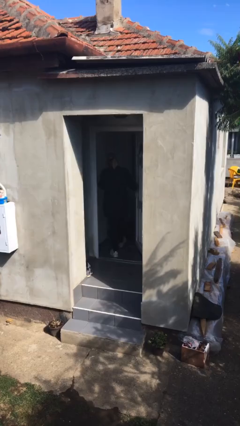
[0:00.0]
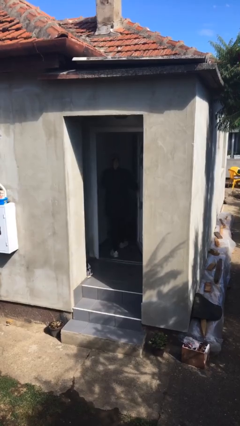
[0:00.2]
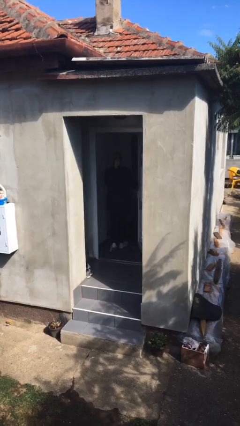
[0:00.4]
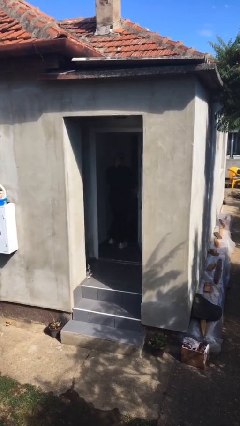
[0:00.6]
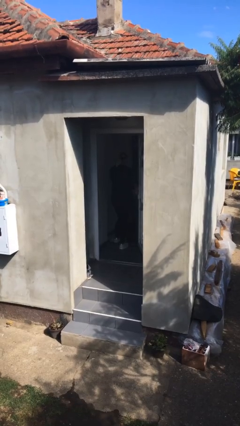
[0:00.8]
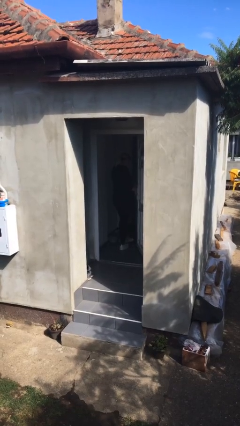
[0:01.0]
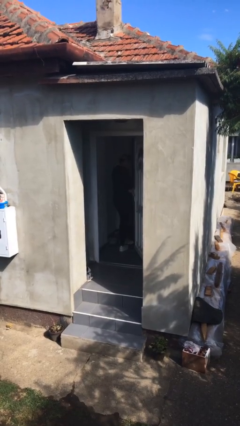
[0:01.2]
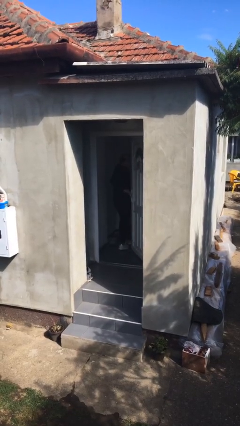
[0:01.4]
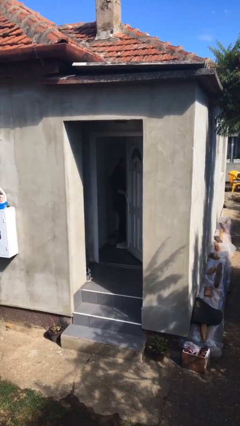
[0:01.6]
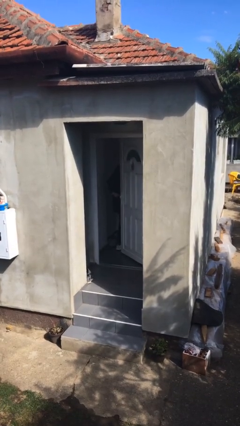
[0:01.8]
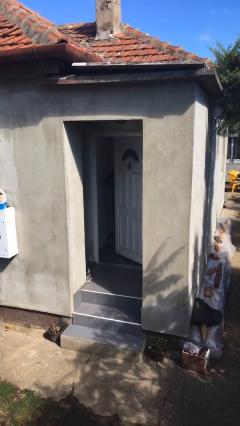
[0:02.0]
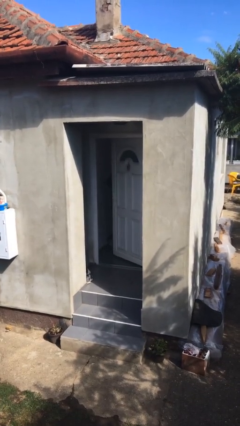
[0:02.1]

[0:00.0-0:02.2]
person exits scene through structure

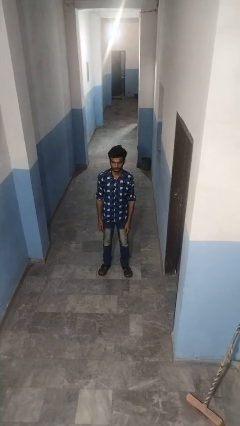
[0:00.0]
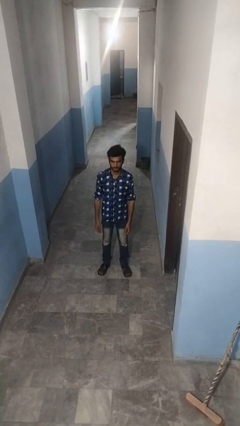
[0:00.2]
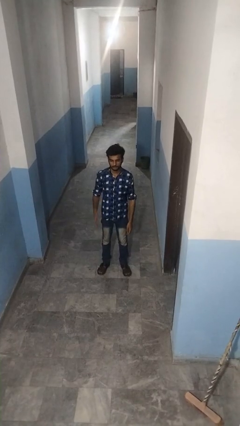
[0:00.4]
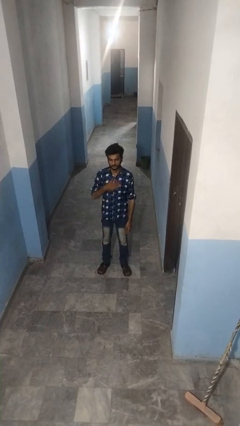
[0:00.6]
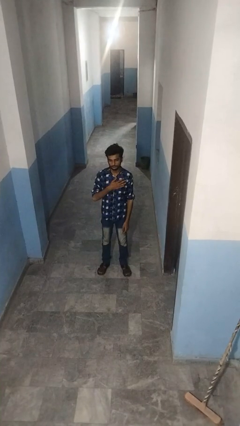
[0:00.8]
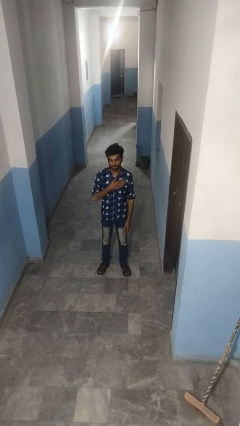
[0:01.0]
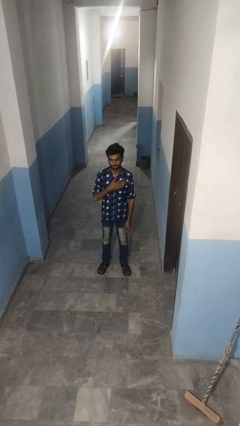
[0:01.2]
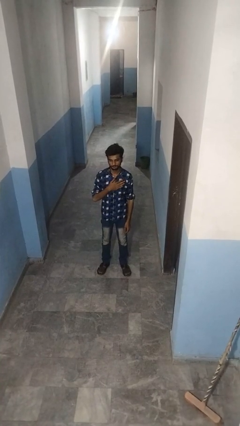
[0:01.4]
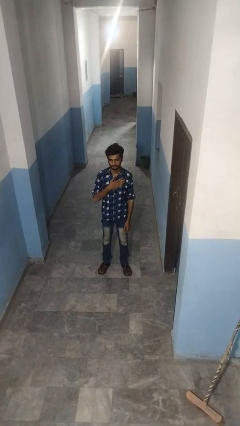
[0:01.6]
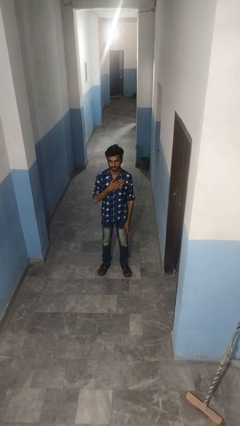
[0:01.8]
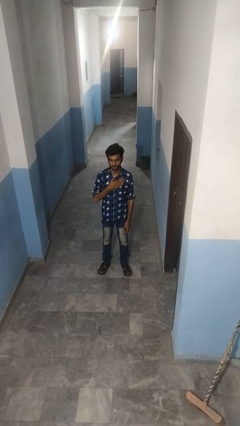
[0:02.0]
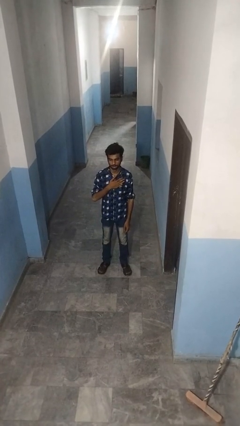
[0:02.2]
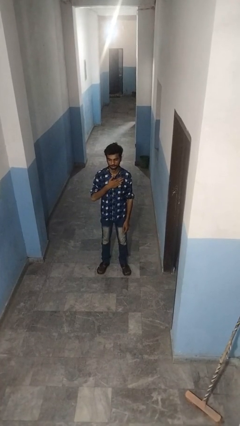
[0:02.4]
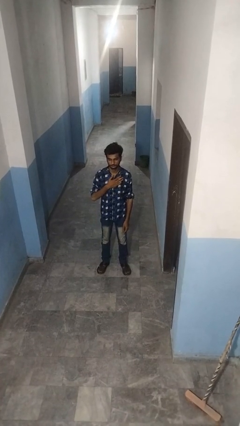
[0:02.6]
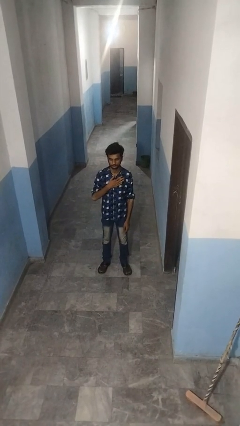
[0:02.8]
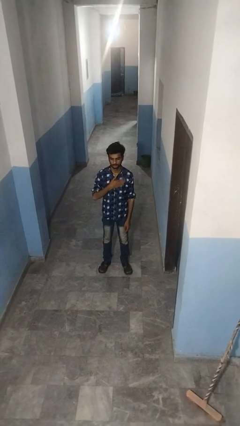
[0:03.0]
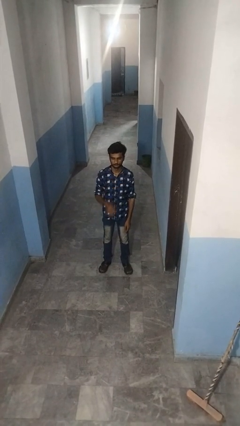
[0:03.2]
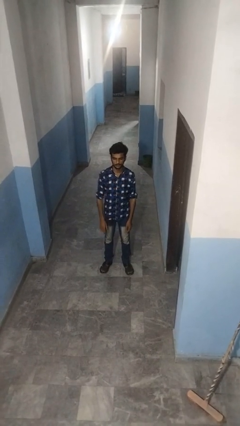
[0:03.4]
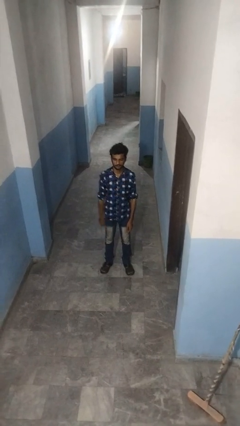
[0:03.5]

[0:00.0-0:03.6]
person drums on chest

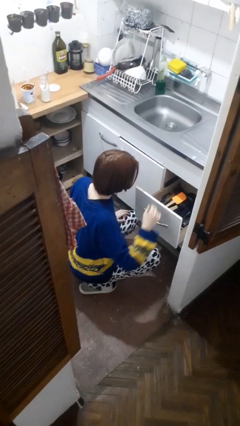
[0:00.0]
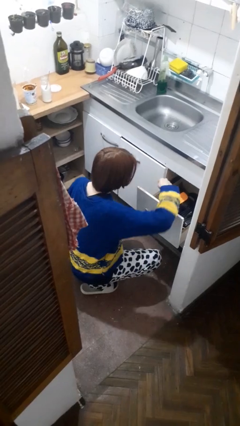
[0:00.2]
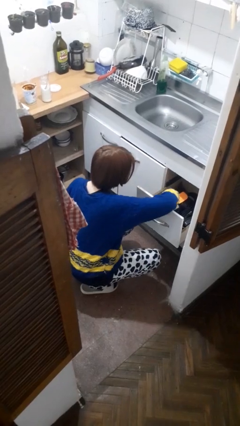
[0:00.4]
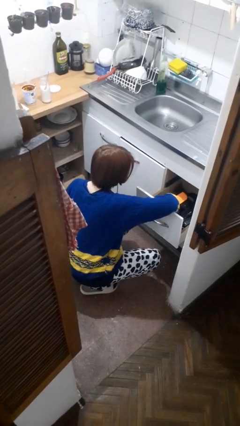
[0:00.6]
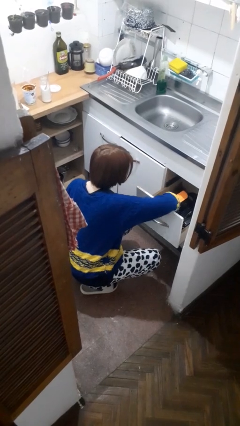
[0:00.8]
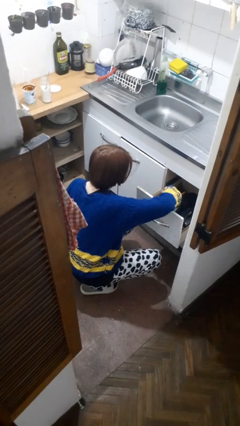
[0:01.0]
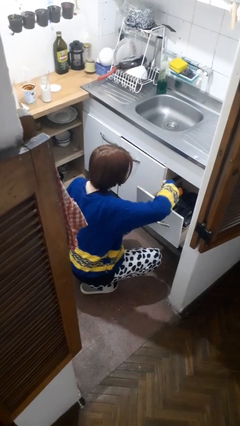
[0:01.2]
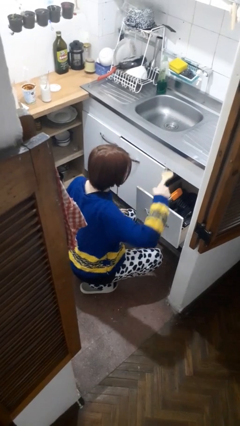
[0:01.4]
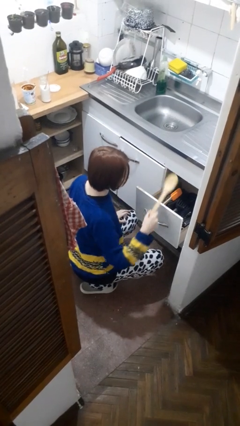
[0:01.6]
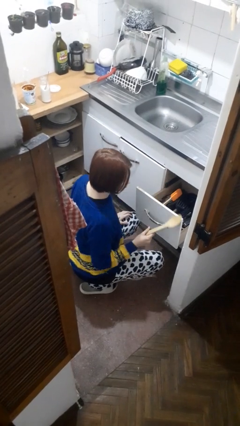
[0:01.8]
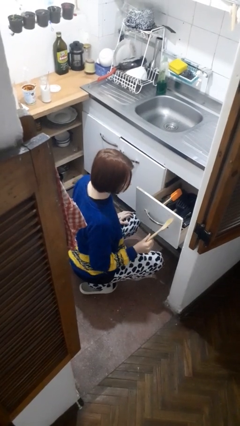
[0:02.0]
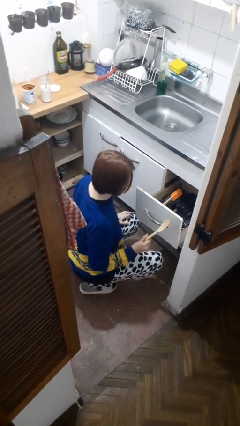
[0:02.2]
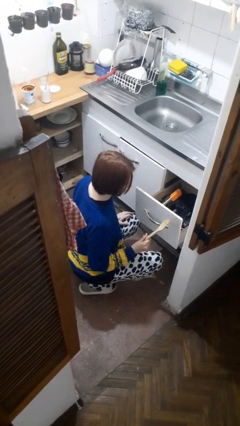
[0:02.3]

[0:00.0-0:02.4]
person takes object from kitchen drawer

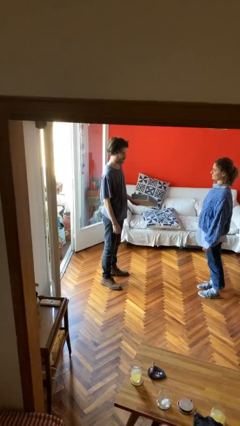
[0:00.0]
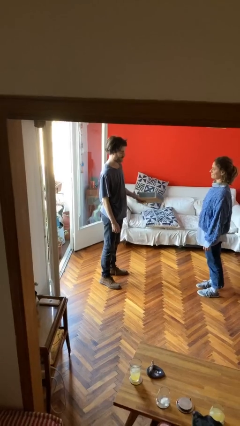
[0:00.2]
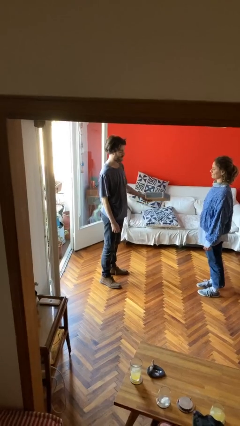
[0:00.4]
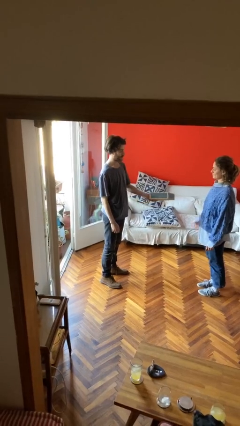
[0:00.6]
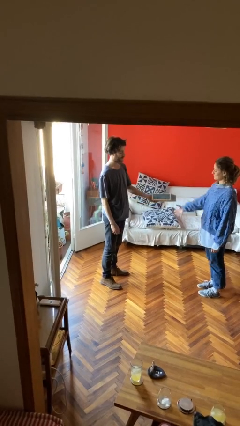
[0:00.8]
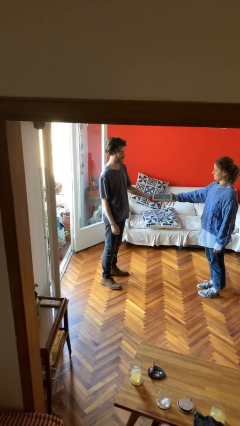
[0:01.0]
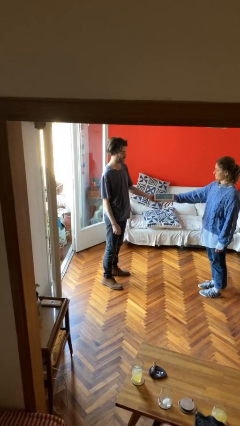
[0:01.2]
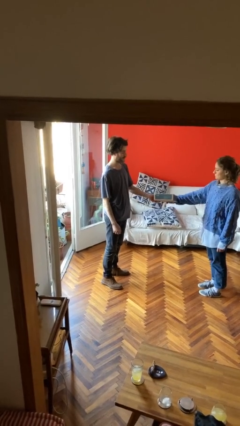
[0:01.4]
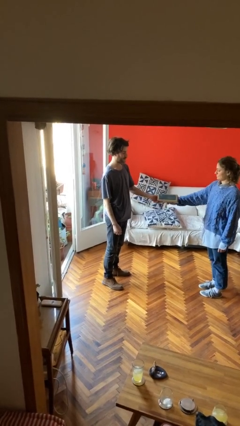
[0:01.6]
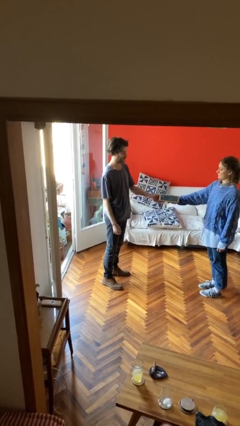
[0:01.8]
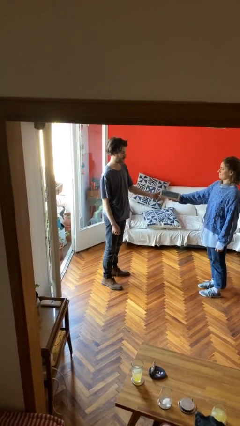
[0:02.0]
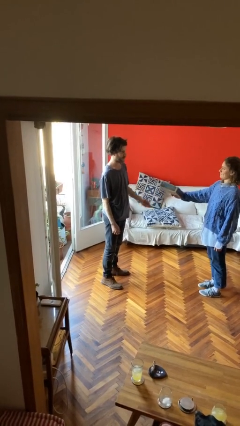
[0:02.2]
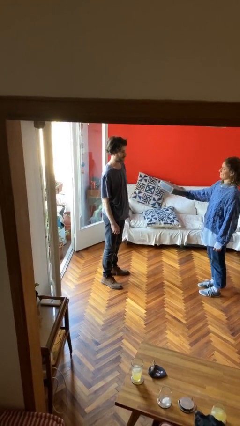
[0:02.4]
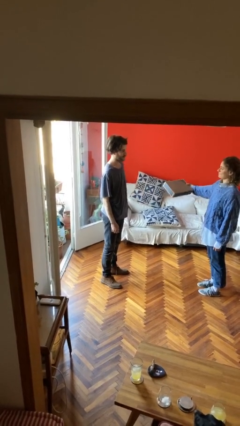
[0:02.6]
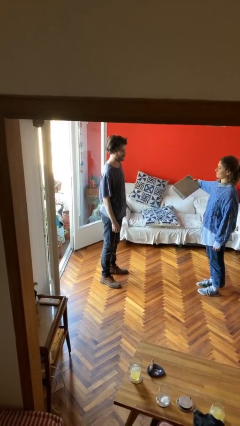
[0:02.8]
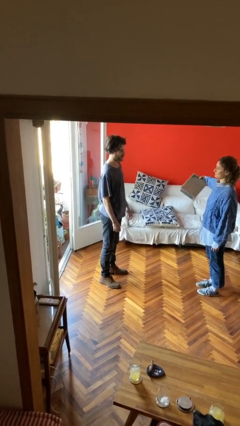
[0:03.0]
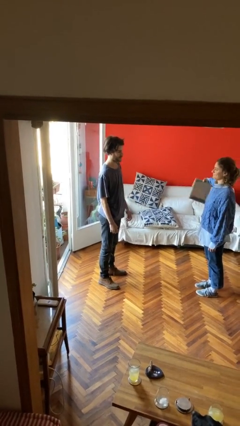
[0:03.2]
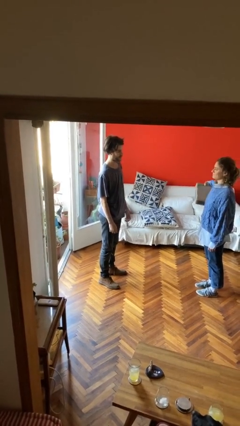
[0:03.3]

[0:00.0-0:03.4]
person transfers object to person

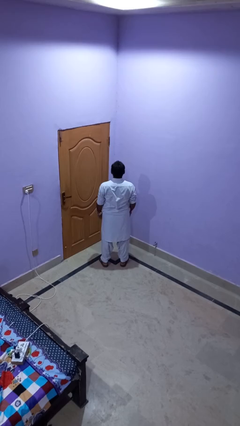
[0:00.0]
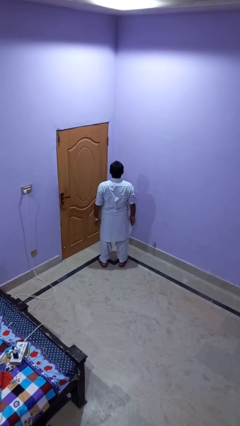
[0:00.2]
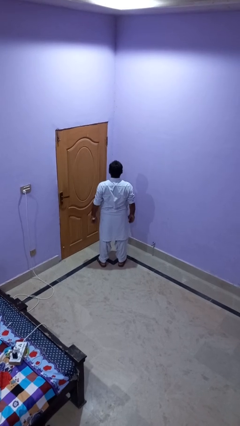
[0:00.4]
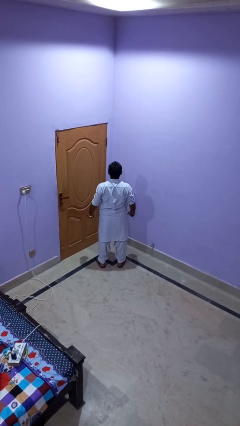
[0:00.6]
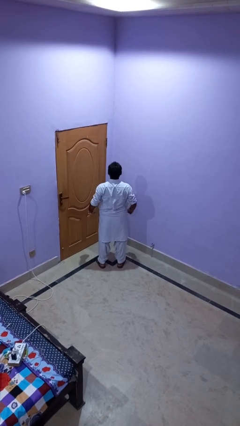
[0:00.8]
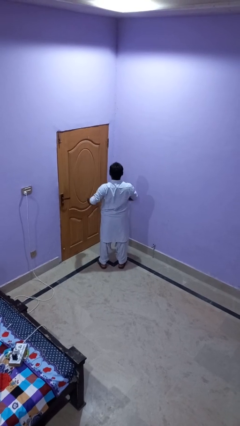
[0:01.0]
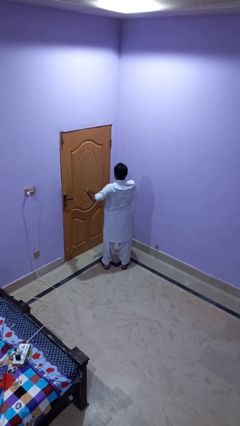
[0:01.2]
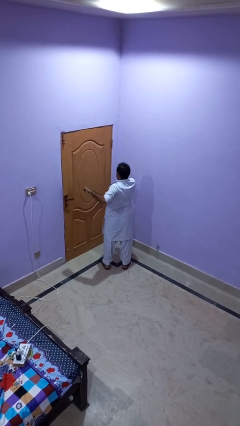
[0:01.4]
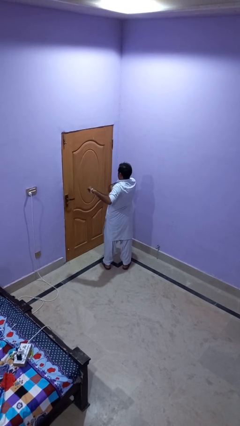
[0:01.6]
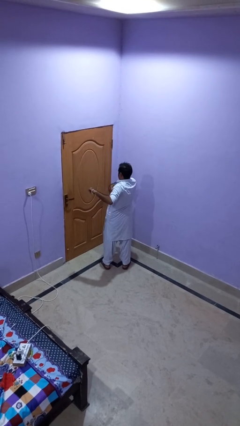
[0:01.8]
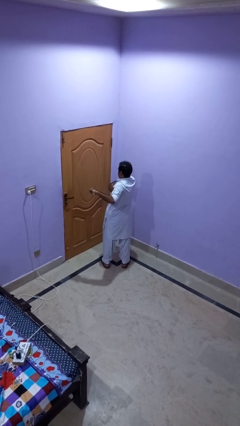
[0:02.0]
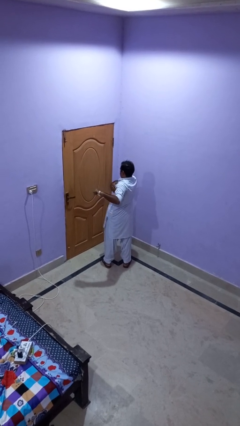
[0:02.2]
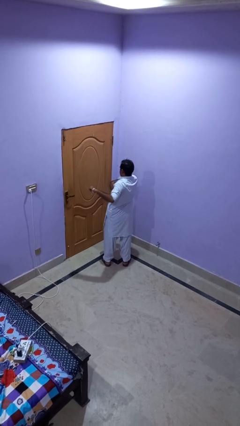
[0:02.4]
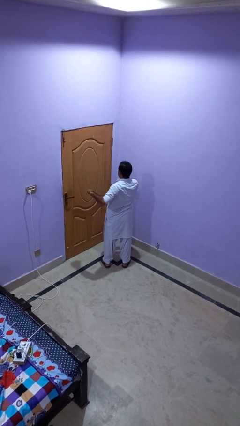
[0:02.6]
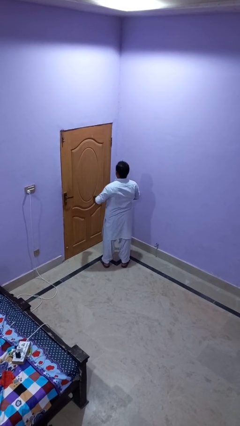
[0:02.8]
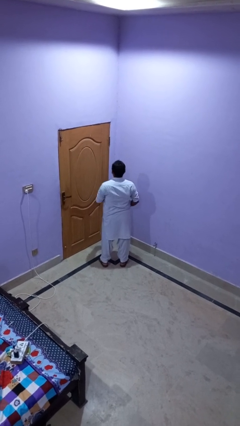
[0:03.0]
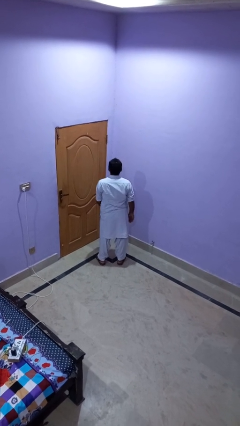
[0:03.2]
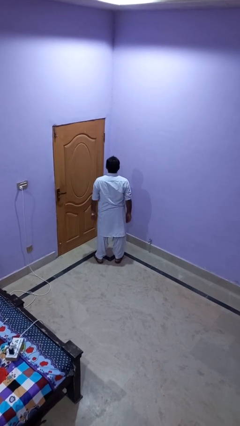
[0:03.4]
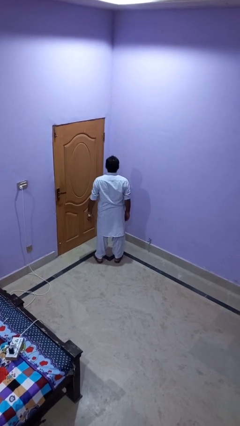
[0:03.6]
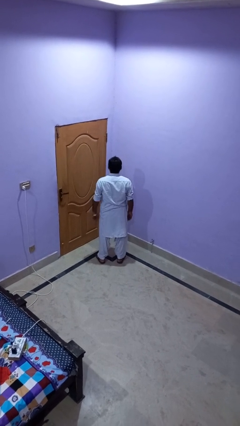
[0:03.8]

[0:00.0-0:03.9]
person stretches arms to side

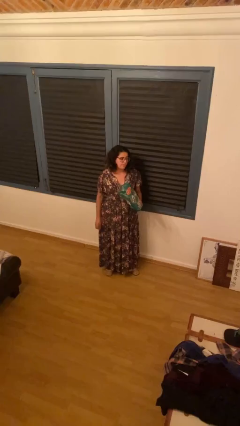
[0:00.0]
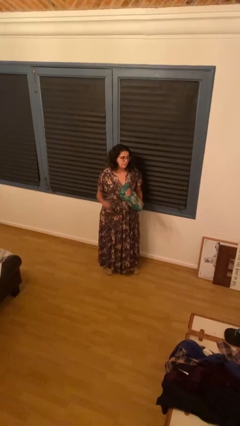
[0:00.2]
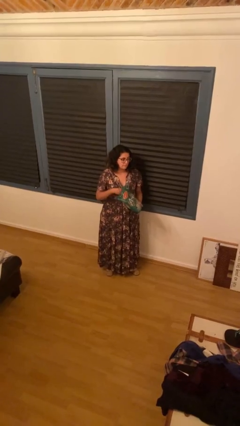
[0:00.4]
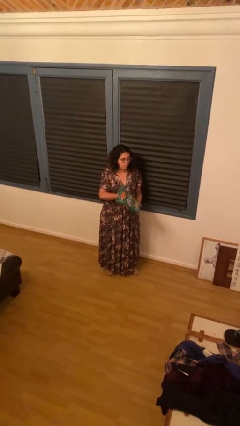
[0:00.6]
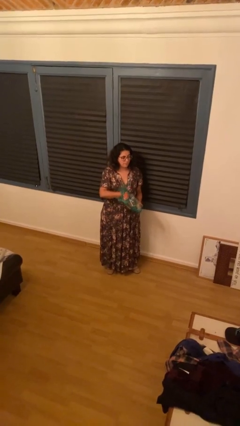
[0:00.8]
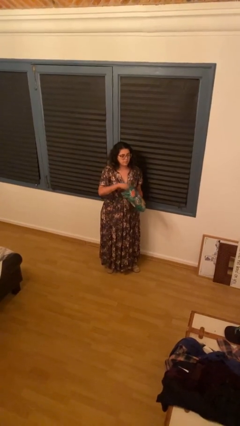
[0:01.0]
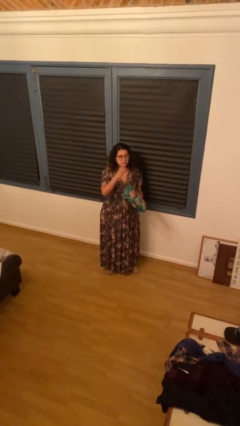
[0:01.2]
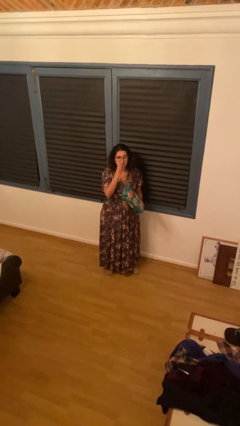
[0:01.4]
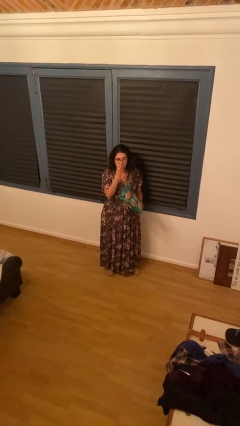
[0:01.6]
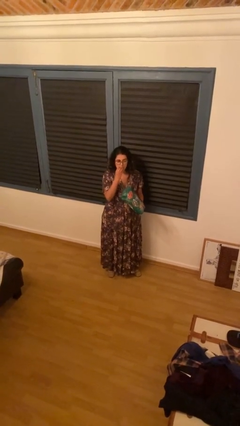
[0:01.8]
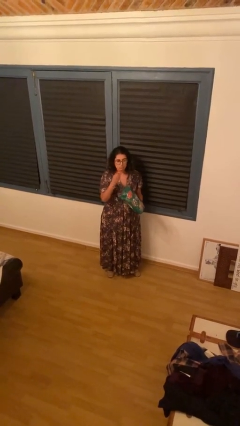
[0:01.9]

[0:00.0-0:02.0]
person eats snack from bag
